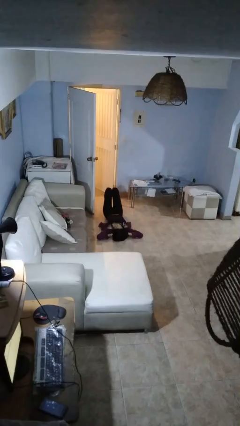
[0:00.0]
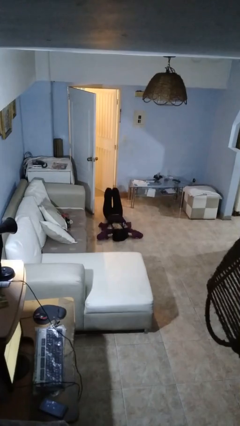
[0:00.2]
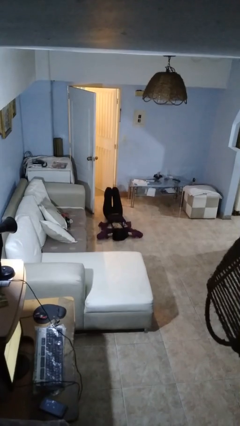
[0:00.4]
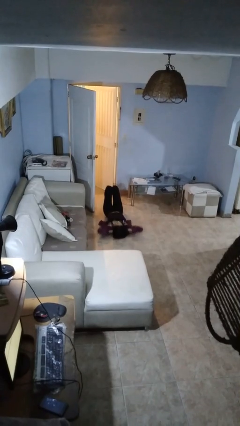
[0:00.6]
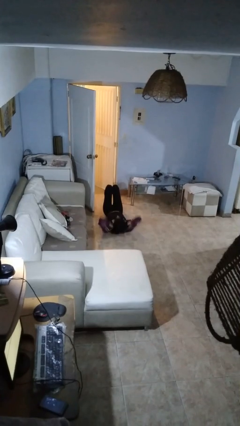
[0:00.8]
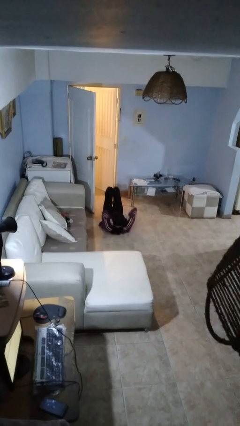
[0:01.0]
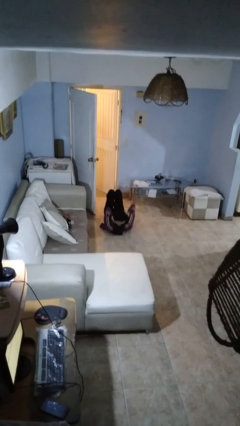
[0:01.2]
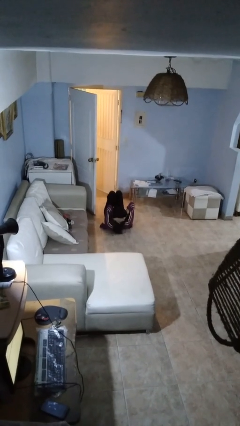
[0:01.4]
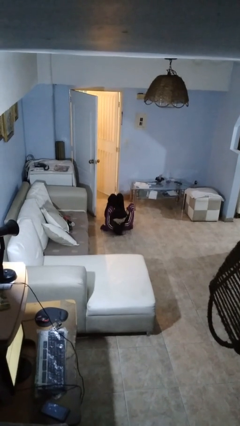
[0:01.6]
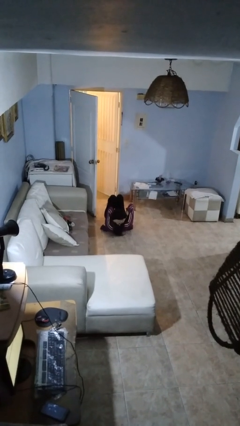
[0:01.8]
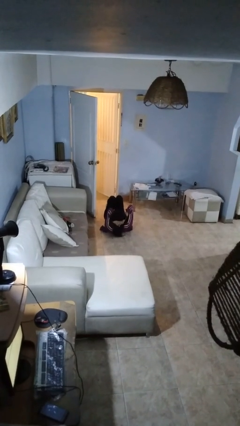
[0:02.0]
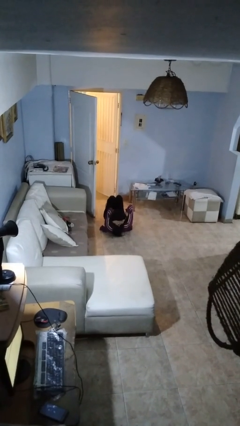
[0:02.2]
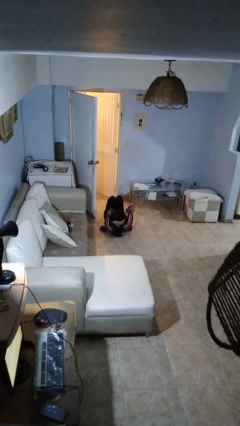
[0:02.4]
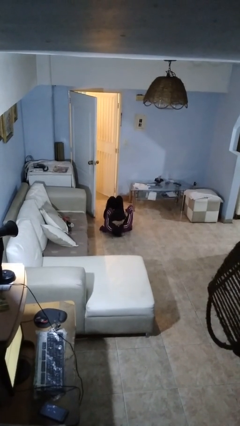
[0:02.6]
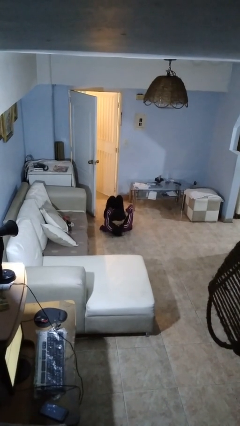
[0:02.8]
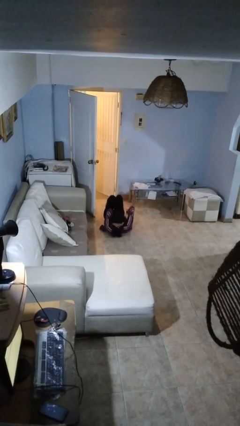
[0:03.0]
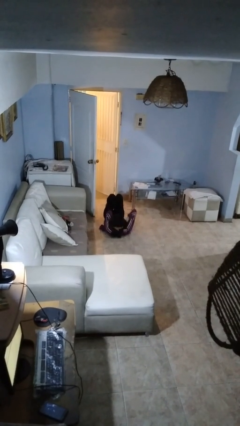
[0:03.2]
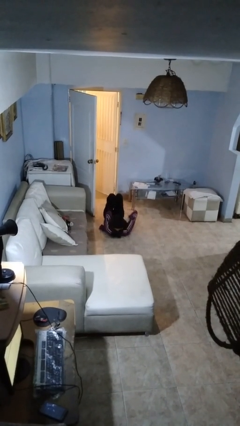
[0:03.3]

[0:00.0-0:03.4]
person exercises with situp

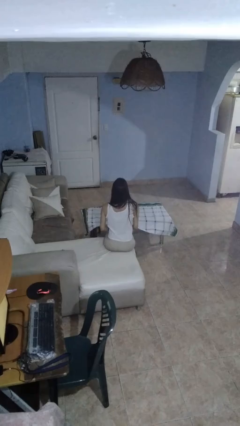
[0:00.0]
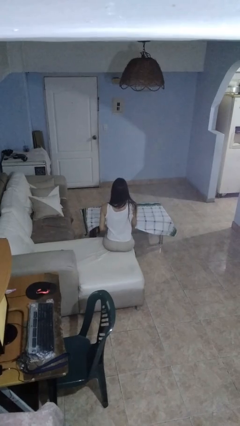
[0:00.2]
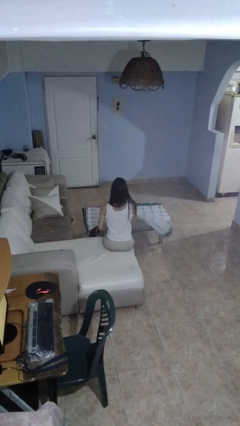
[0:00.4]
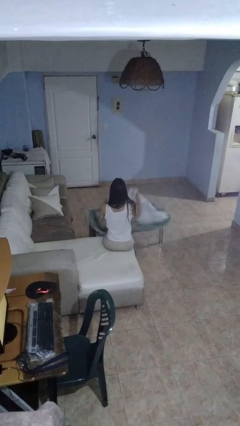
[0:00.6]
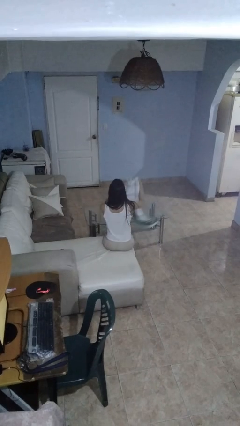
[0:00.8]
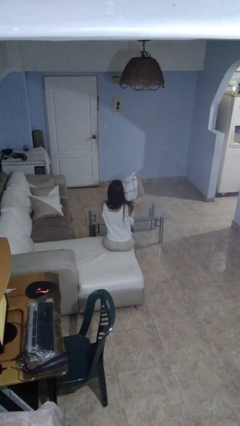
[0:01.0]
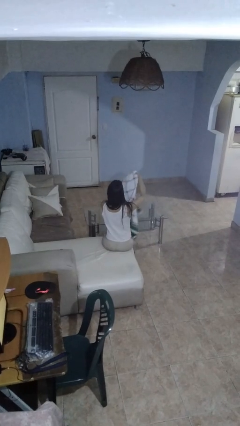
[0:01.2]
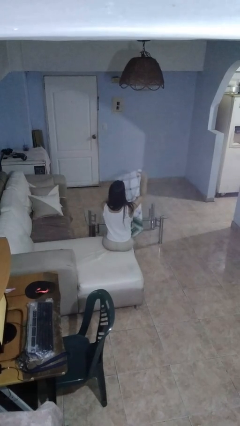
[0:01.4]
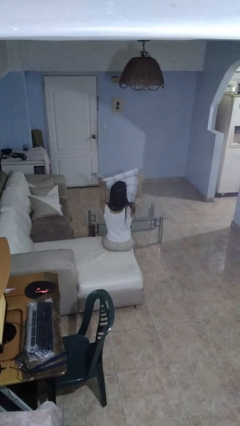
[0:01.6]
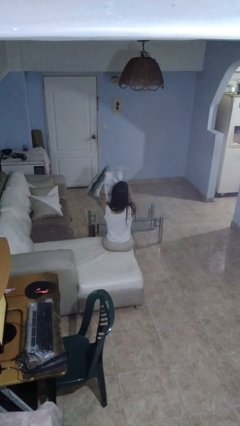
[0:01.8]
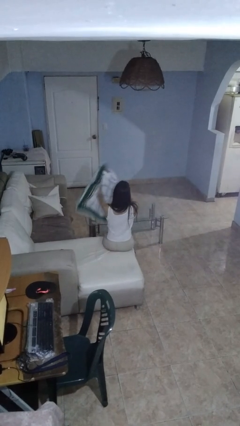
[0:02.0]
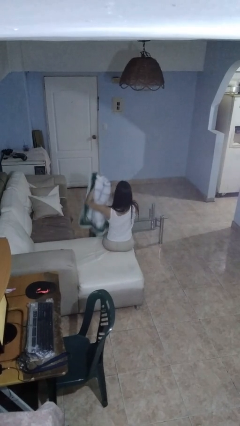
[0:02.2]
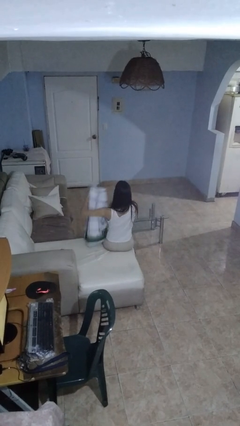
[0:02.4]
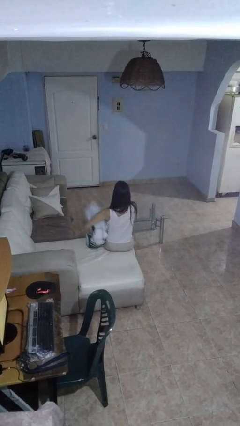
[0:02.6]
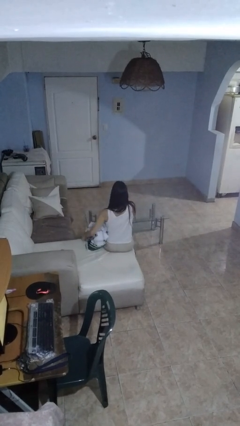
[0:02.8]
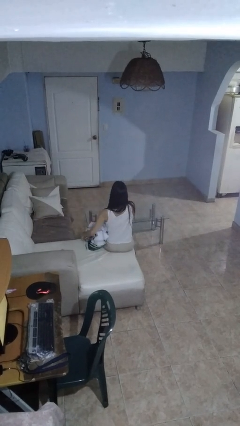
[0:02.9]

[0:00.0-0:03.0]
person folds tablecloth

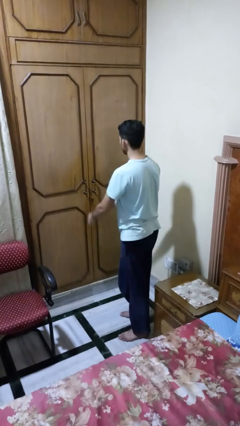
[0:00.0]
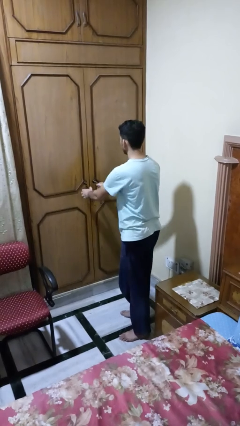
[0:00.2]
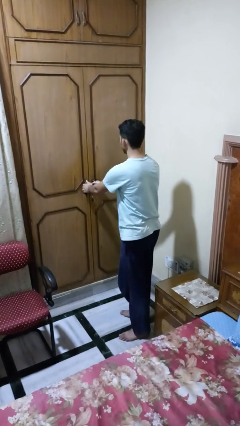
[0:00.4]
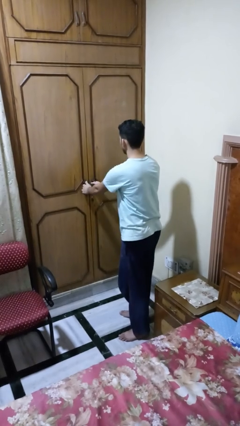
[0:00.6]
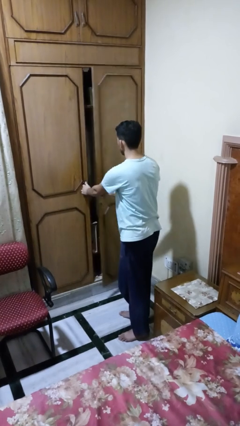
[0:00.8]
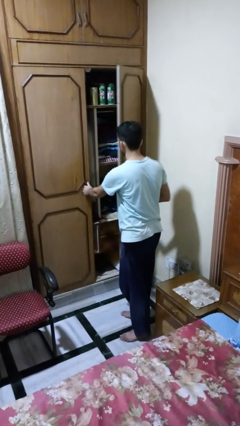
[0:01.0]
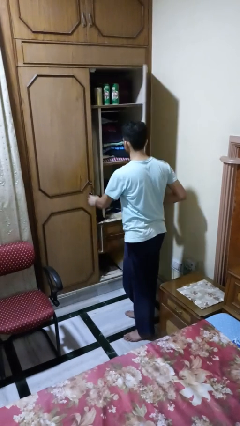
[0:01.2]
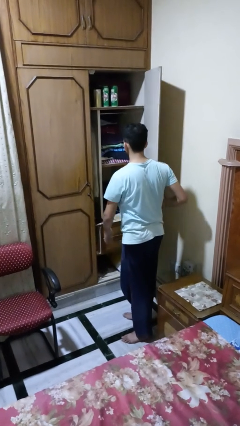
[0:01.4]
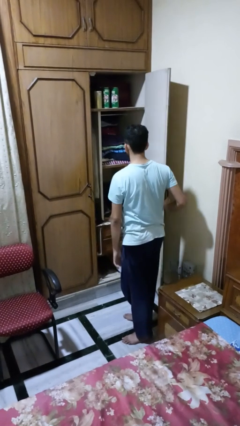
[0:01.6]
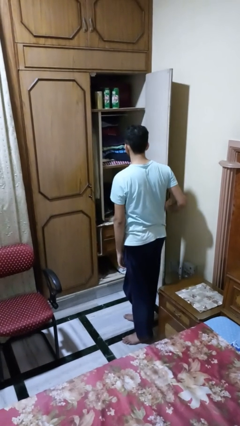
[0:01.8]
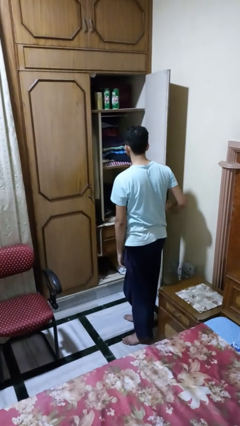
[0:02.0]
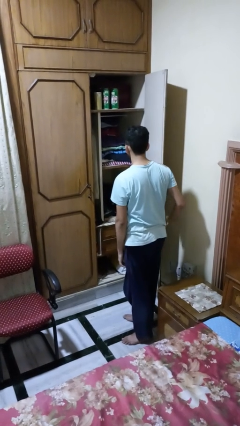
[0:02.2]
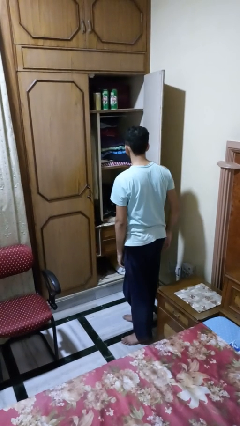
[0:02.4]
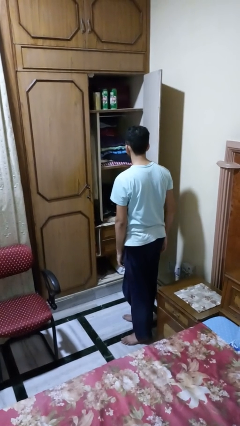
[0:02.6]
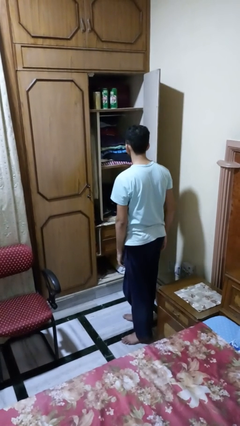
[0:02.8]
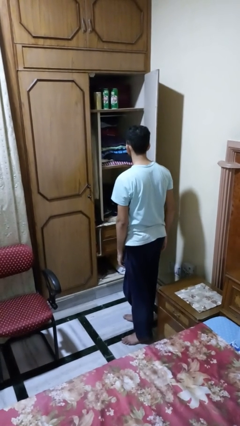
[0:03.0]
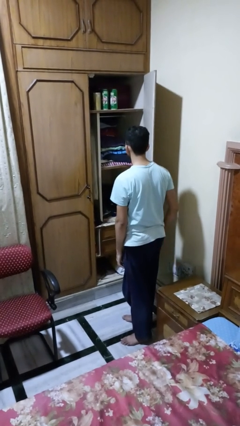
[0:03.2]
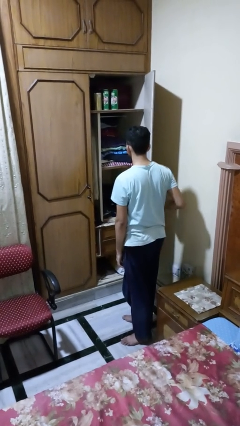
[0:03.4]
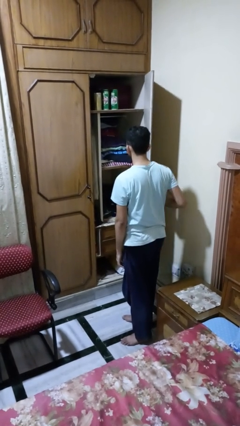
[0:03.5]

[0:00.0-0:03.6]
person opens closet door

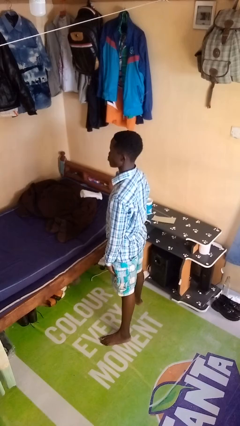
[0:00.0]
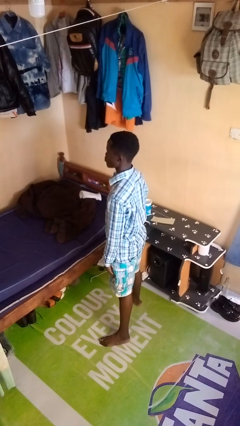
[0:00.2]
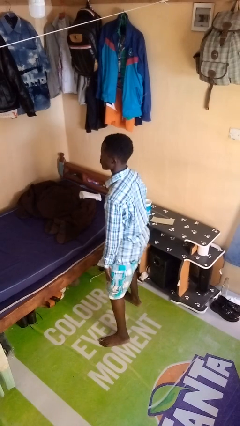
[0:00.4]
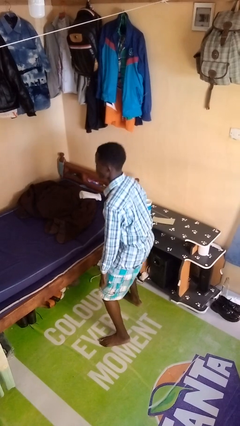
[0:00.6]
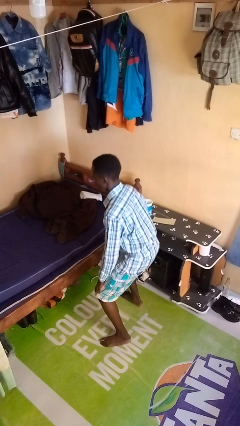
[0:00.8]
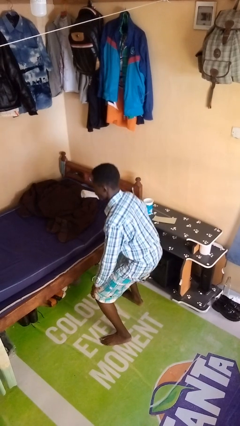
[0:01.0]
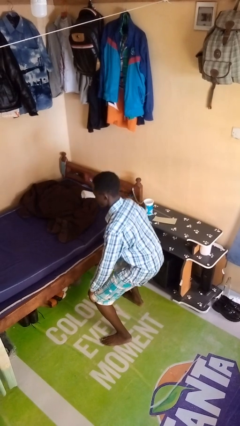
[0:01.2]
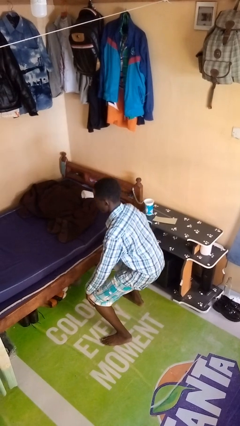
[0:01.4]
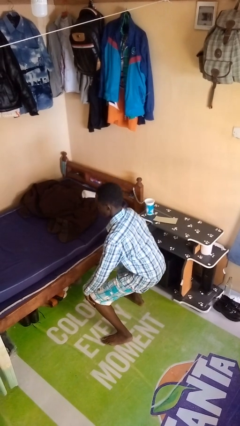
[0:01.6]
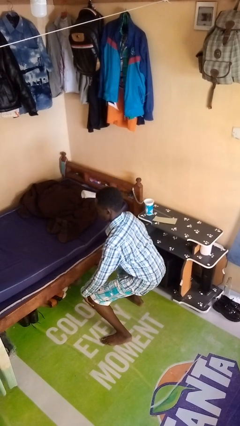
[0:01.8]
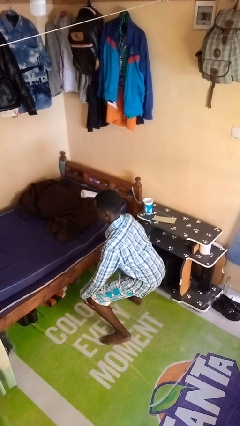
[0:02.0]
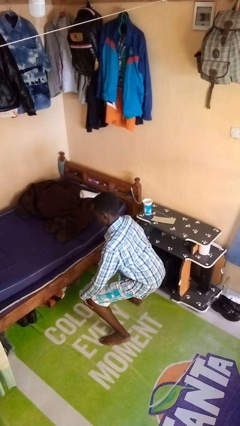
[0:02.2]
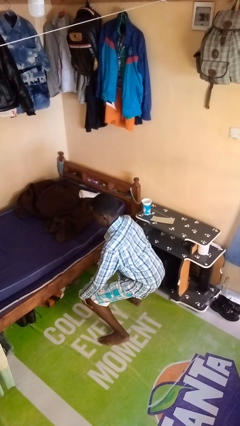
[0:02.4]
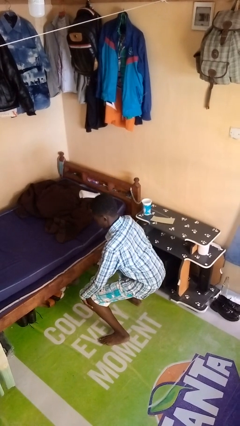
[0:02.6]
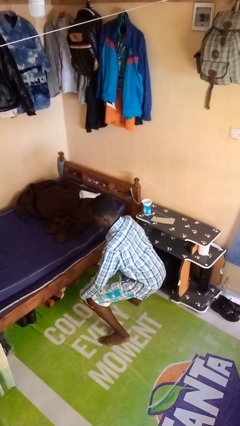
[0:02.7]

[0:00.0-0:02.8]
person squats

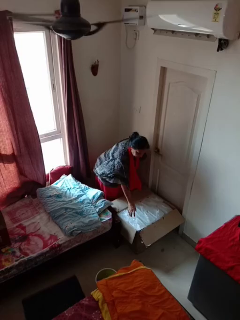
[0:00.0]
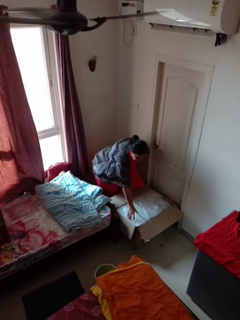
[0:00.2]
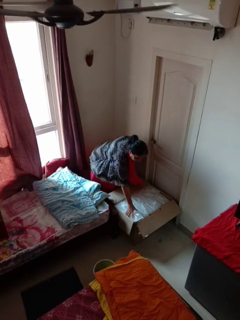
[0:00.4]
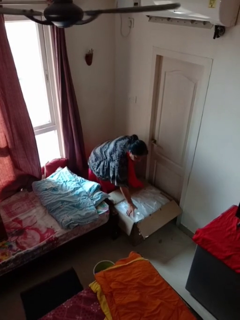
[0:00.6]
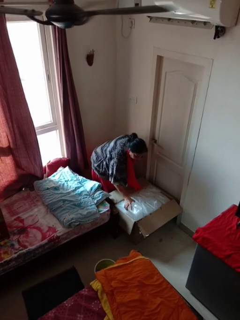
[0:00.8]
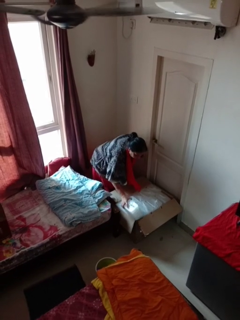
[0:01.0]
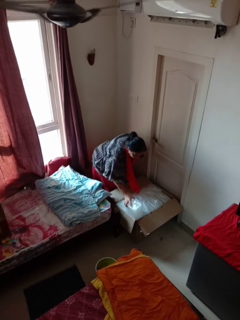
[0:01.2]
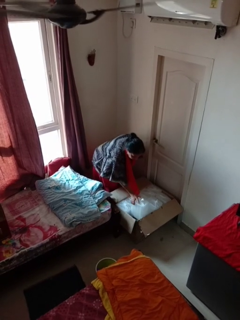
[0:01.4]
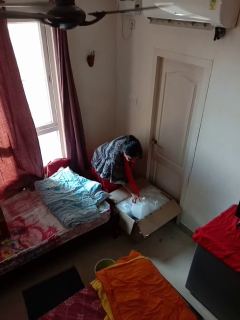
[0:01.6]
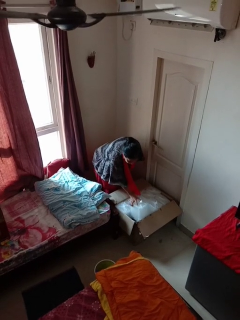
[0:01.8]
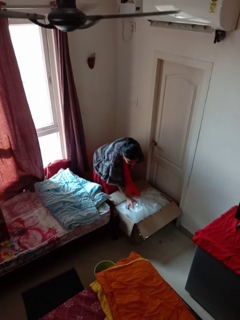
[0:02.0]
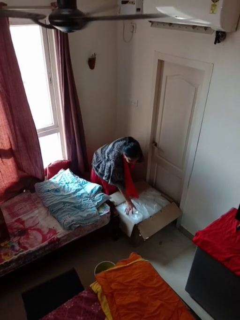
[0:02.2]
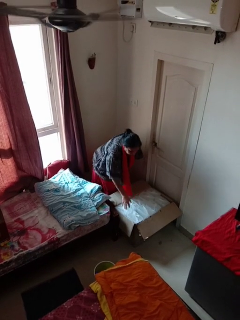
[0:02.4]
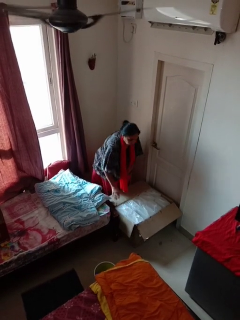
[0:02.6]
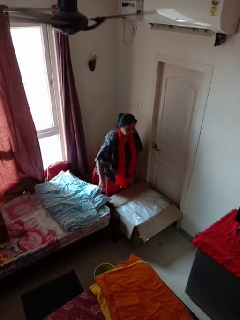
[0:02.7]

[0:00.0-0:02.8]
person searches in box

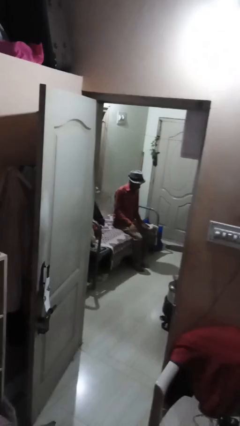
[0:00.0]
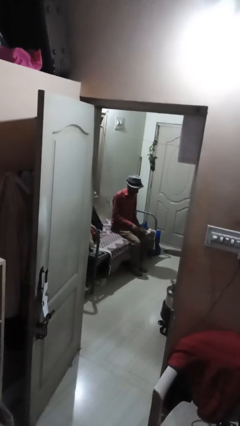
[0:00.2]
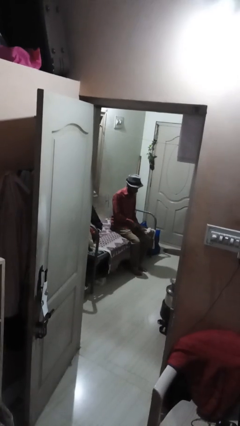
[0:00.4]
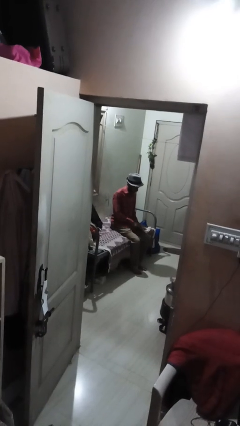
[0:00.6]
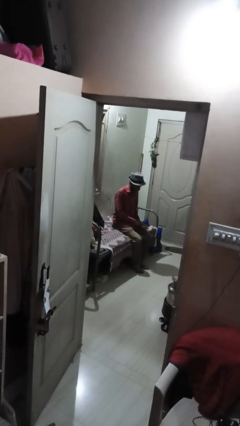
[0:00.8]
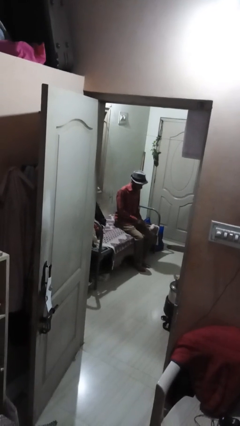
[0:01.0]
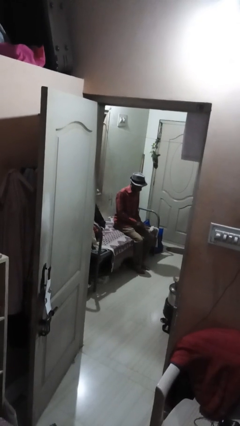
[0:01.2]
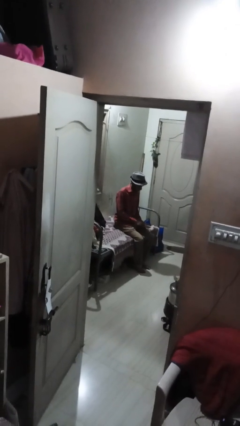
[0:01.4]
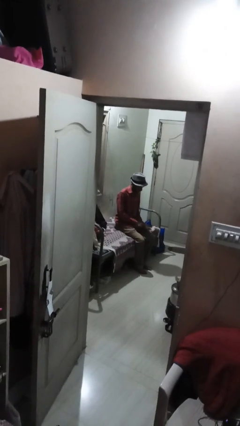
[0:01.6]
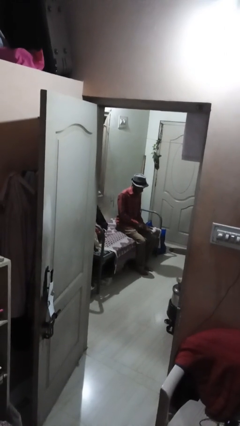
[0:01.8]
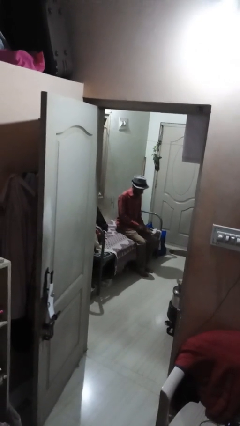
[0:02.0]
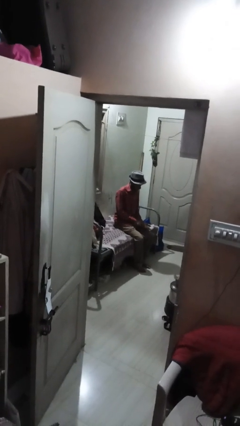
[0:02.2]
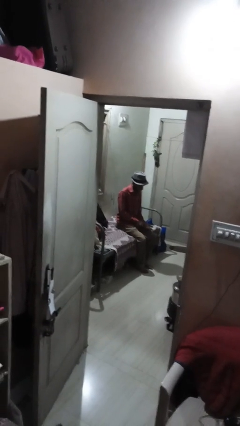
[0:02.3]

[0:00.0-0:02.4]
person looks at hands in lap
